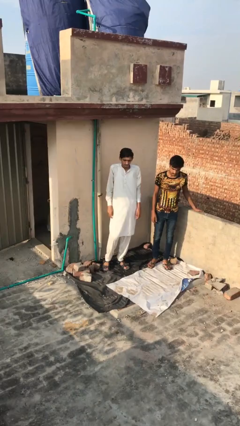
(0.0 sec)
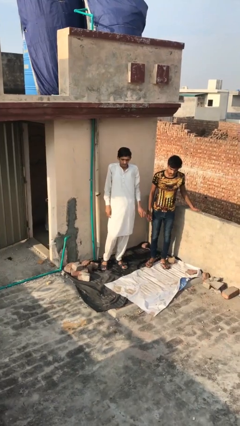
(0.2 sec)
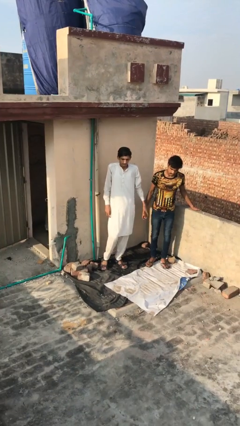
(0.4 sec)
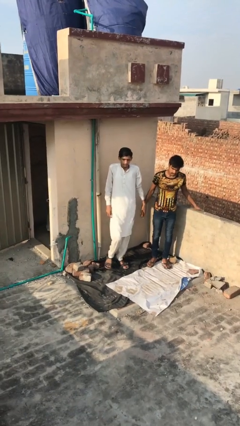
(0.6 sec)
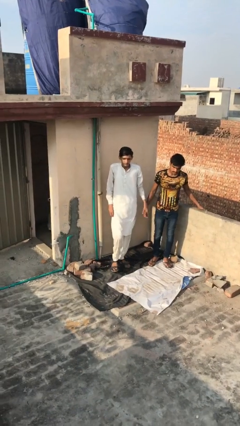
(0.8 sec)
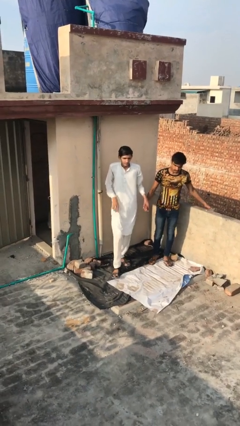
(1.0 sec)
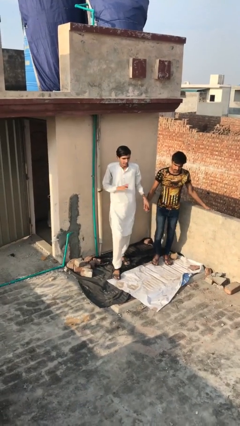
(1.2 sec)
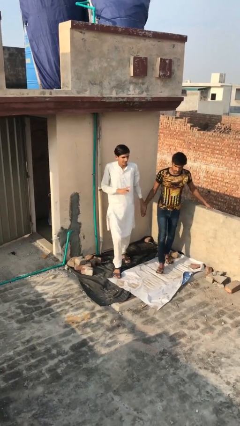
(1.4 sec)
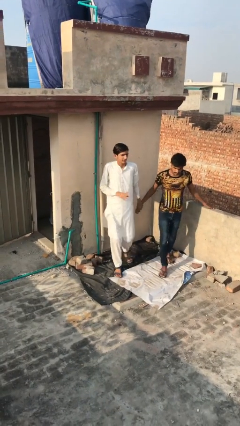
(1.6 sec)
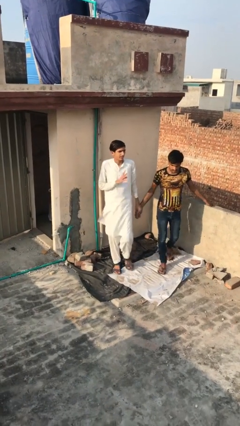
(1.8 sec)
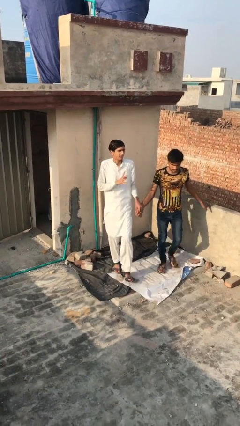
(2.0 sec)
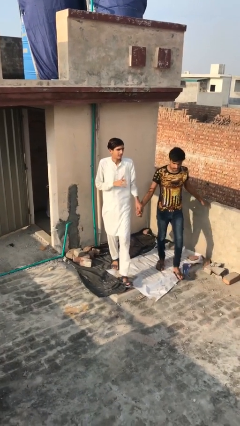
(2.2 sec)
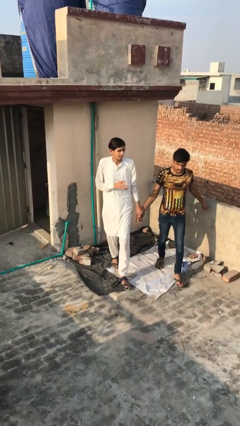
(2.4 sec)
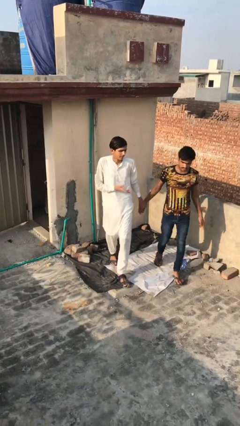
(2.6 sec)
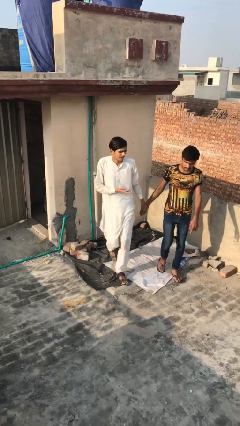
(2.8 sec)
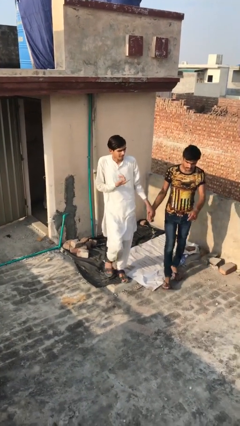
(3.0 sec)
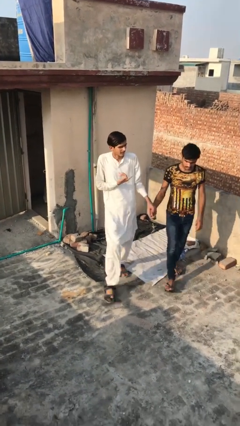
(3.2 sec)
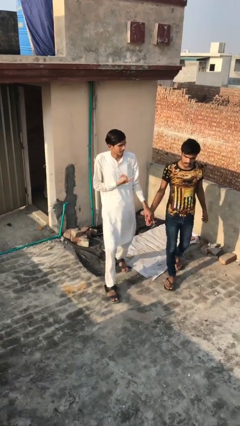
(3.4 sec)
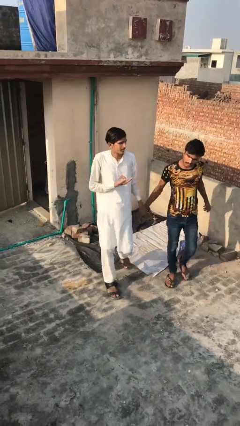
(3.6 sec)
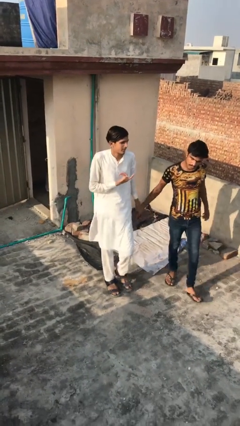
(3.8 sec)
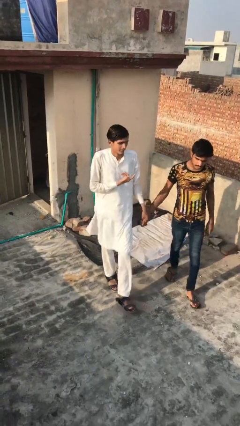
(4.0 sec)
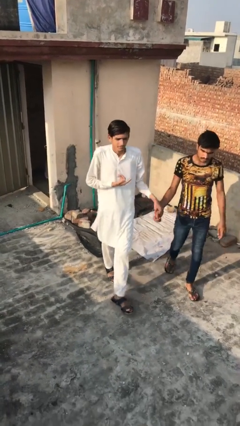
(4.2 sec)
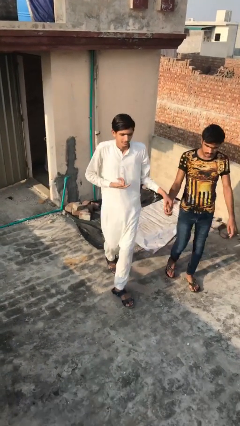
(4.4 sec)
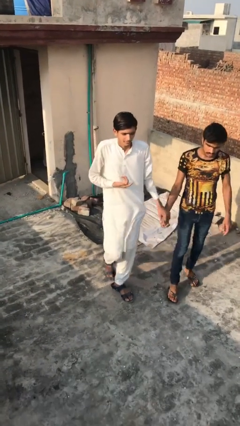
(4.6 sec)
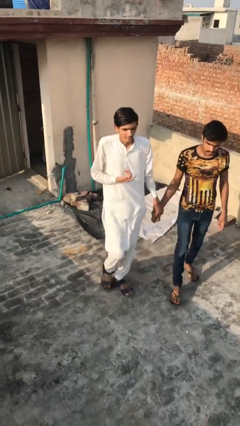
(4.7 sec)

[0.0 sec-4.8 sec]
person holds hand

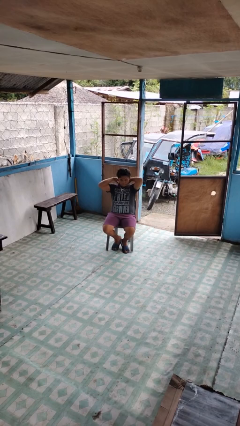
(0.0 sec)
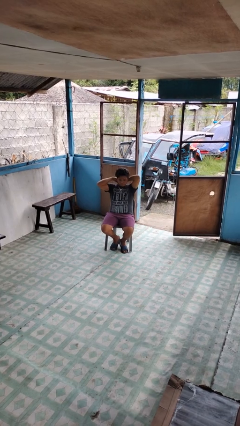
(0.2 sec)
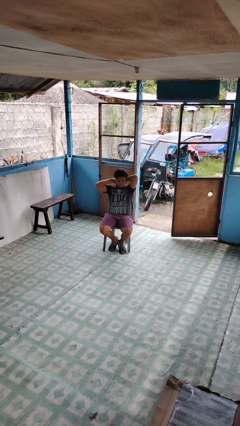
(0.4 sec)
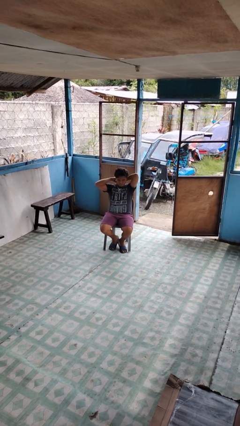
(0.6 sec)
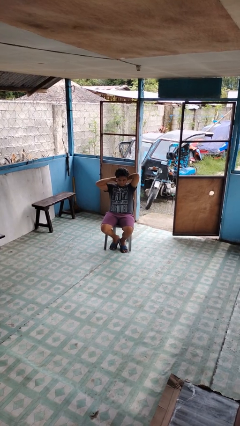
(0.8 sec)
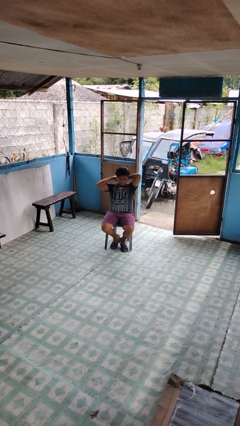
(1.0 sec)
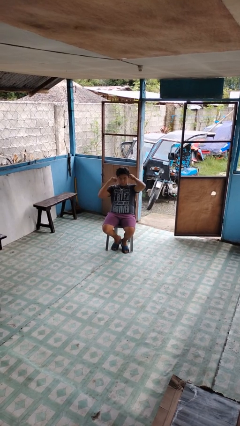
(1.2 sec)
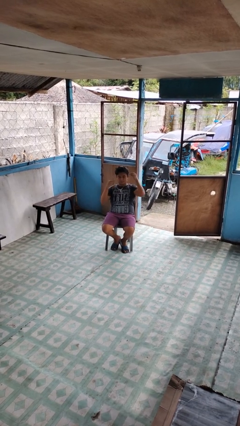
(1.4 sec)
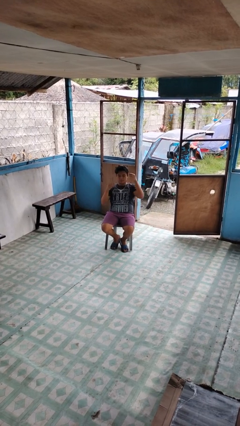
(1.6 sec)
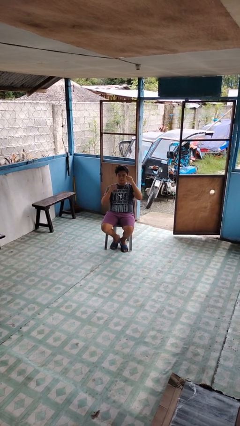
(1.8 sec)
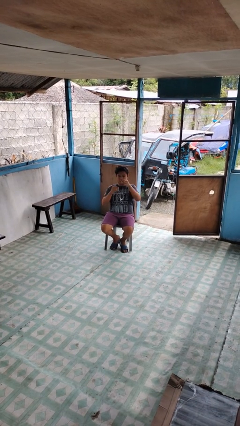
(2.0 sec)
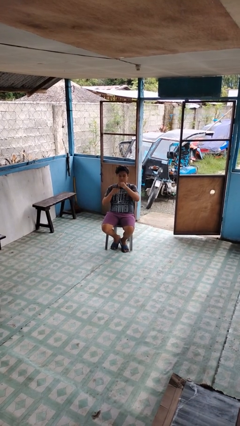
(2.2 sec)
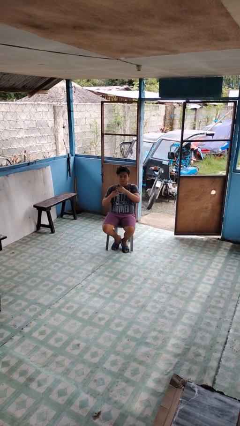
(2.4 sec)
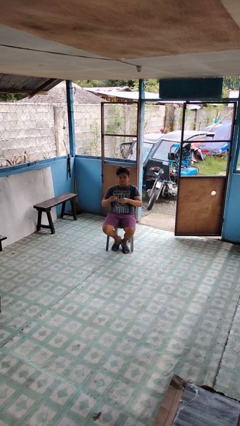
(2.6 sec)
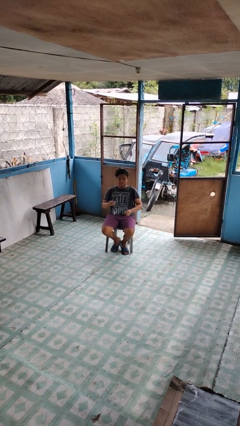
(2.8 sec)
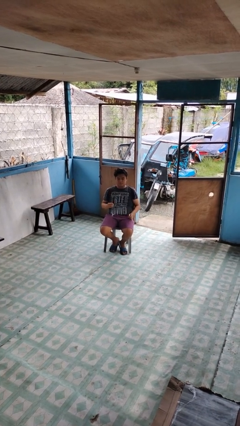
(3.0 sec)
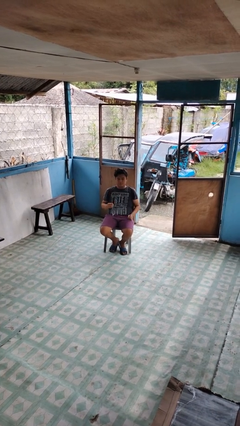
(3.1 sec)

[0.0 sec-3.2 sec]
person takes off necklace

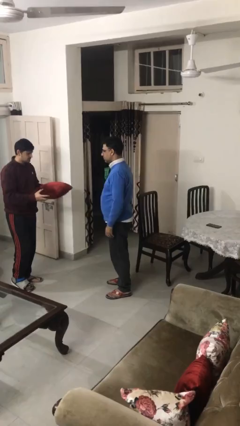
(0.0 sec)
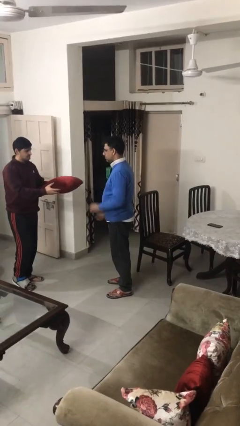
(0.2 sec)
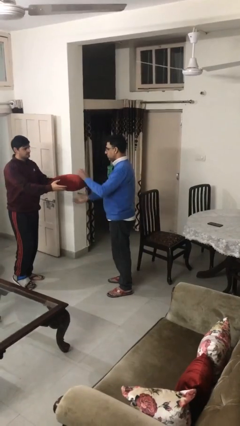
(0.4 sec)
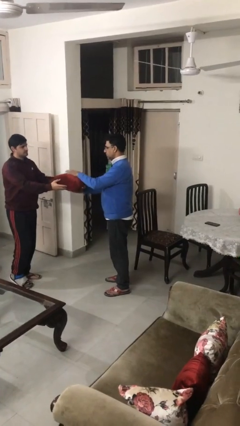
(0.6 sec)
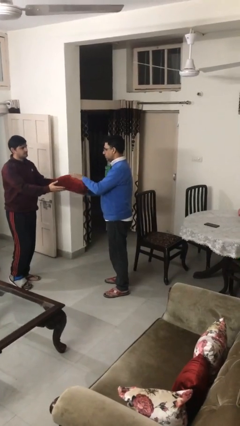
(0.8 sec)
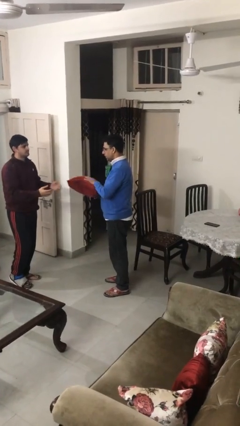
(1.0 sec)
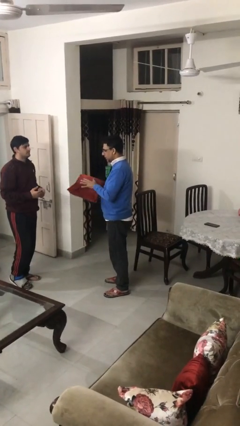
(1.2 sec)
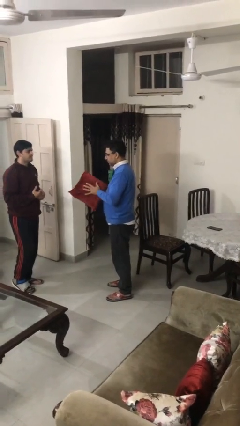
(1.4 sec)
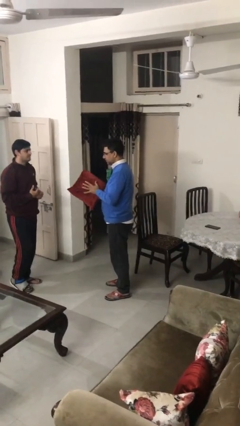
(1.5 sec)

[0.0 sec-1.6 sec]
person transfers object to person

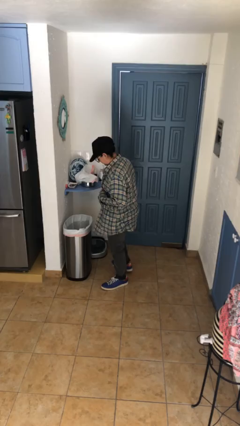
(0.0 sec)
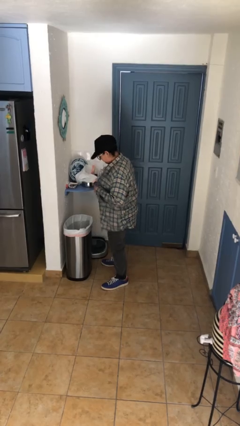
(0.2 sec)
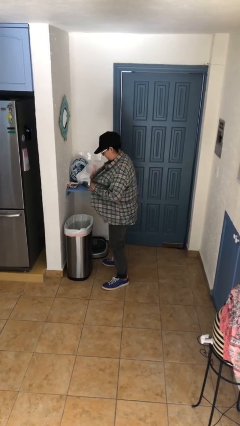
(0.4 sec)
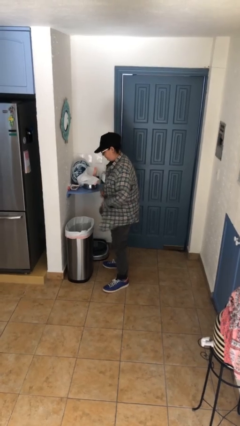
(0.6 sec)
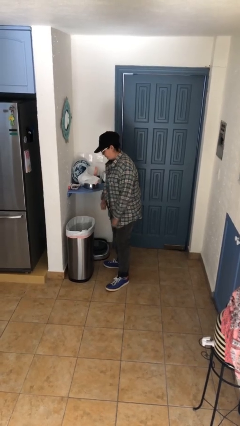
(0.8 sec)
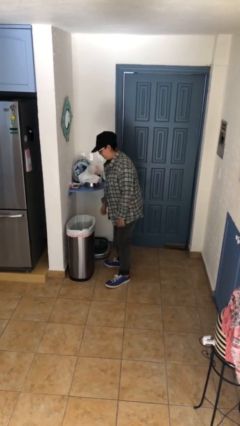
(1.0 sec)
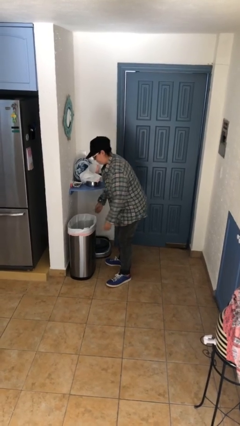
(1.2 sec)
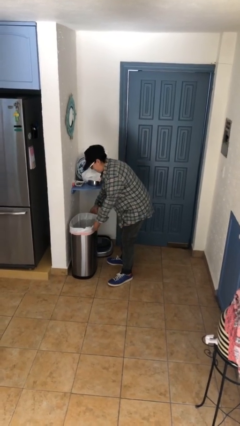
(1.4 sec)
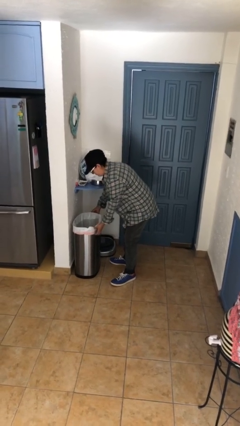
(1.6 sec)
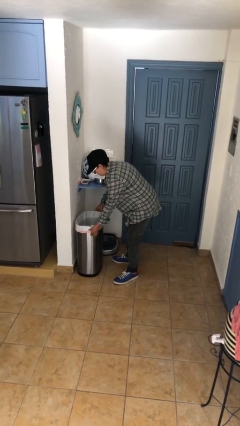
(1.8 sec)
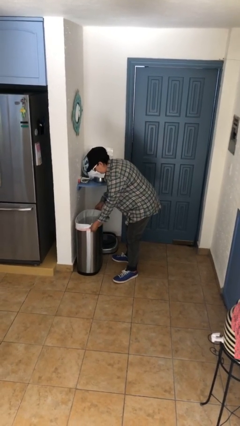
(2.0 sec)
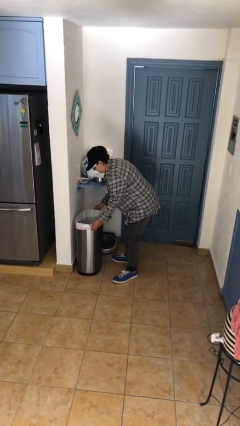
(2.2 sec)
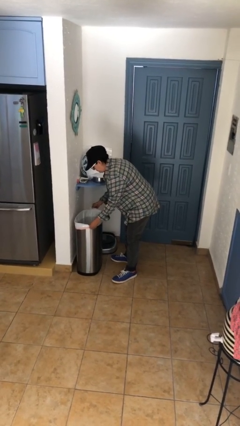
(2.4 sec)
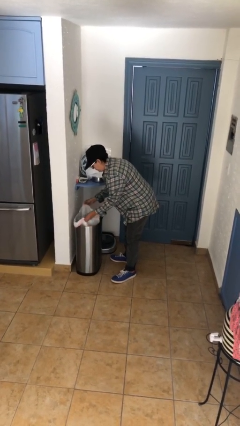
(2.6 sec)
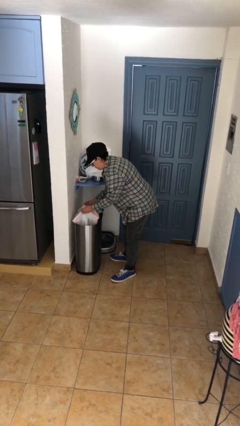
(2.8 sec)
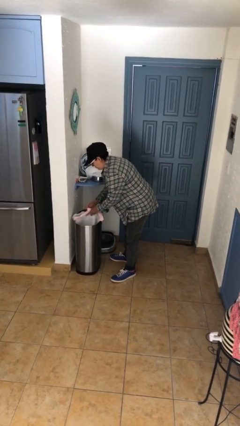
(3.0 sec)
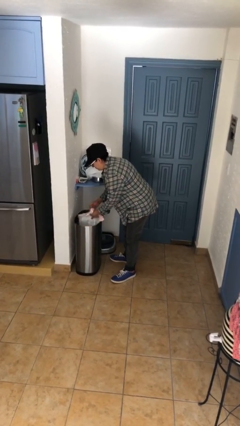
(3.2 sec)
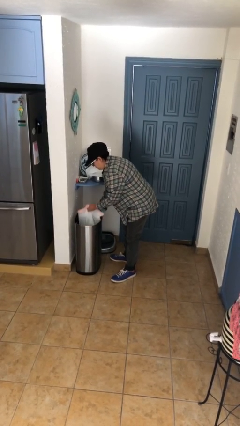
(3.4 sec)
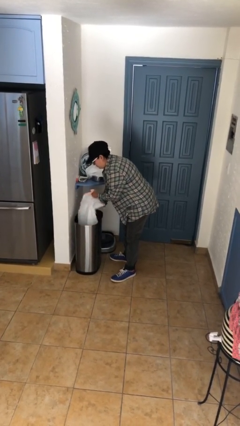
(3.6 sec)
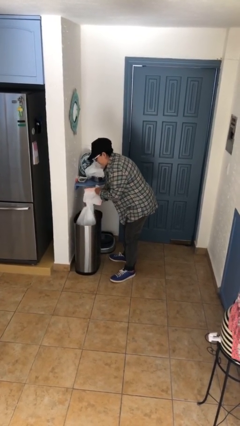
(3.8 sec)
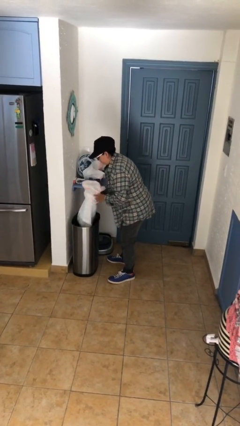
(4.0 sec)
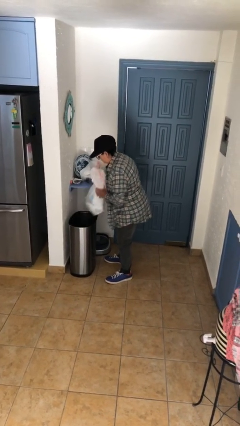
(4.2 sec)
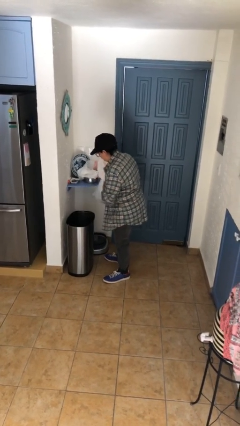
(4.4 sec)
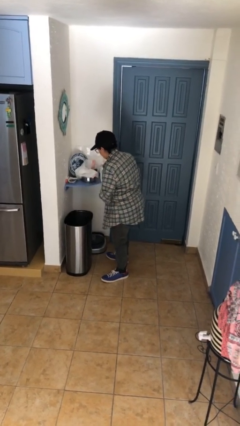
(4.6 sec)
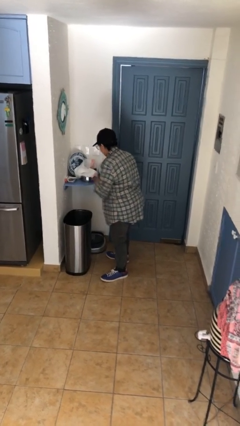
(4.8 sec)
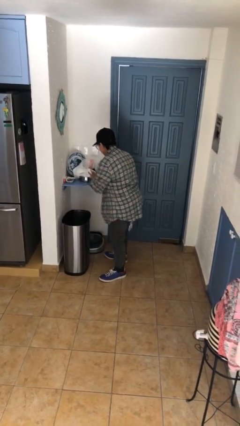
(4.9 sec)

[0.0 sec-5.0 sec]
person removes trashbag from trashcan

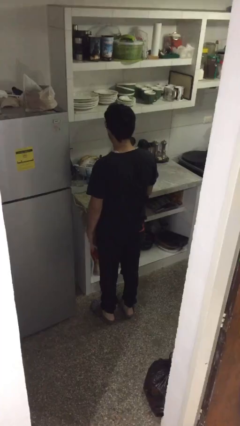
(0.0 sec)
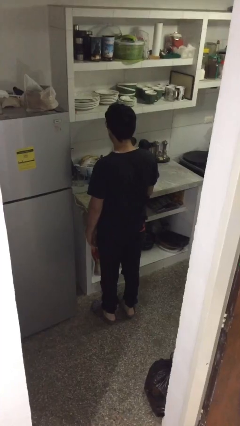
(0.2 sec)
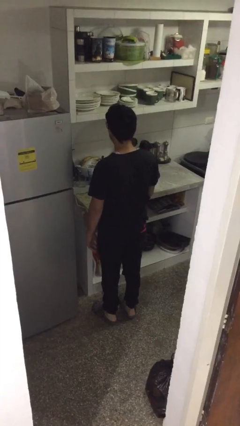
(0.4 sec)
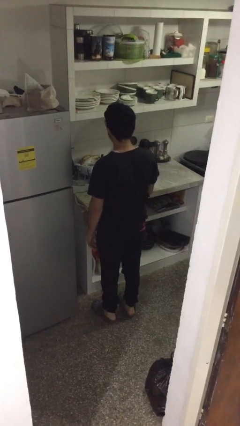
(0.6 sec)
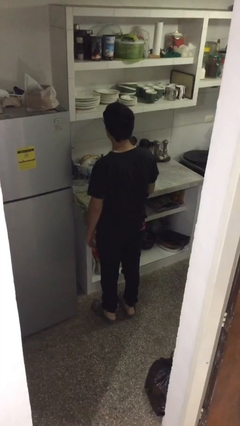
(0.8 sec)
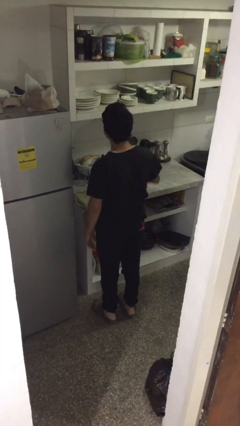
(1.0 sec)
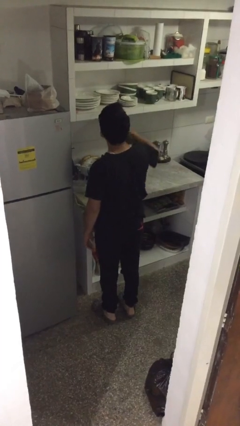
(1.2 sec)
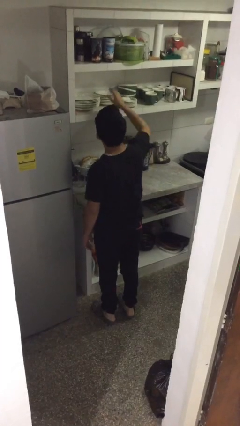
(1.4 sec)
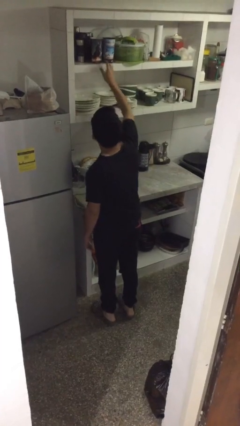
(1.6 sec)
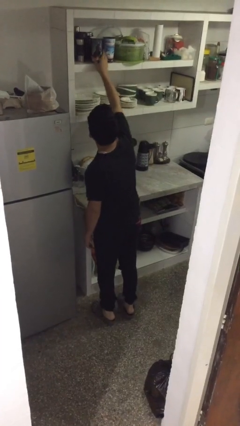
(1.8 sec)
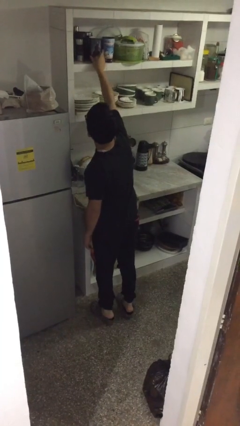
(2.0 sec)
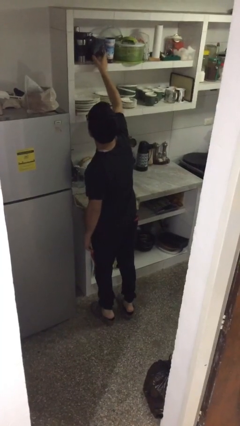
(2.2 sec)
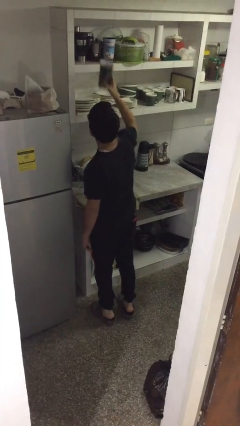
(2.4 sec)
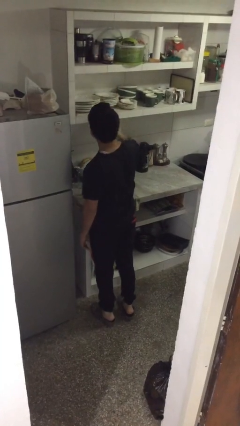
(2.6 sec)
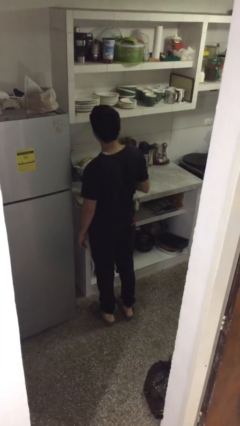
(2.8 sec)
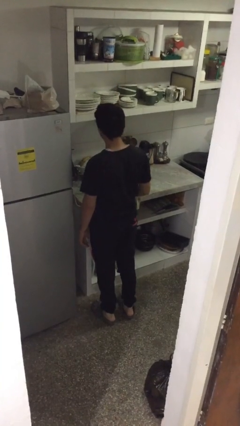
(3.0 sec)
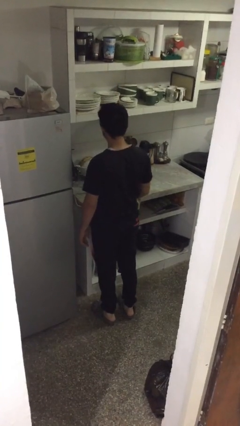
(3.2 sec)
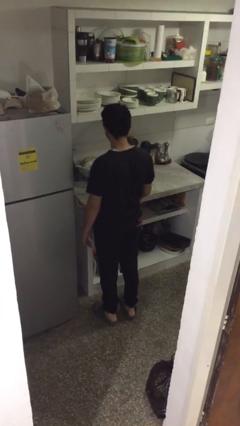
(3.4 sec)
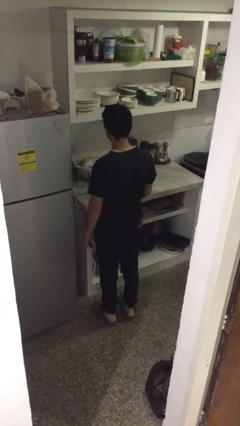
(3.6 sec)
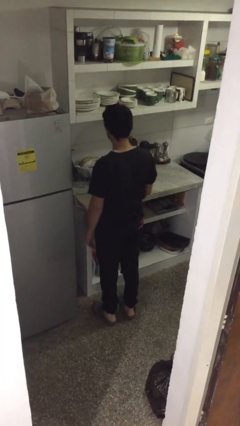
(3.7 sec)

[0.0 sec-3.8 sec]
person picks up object from shelf
